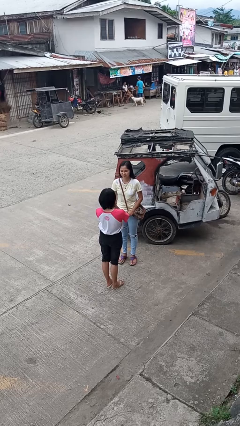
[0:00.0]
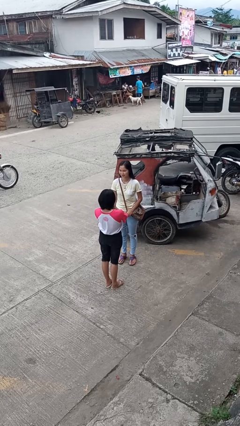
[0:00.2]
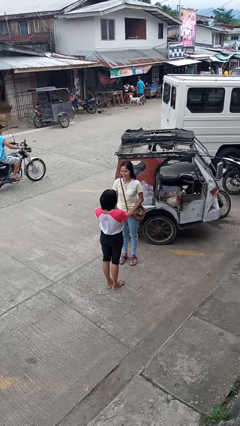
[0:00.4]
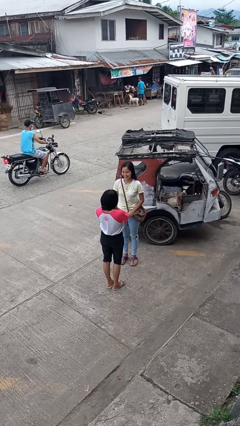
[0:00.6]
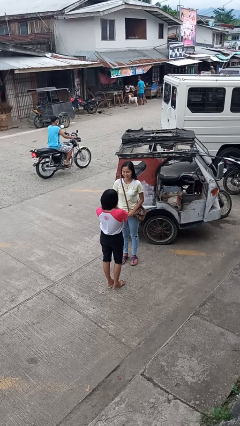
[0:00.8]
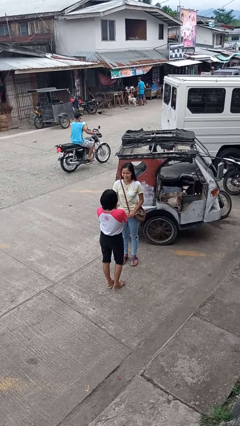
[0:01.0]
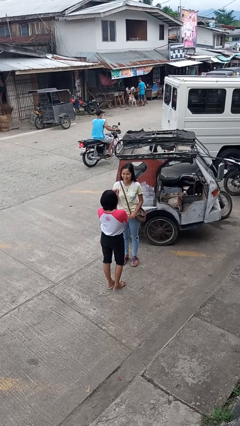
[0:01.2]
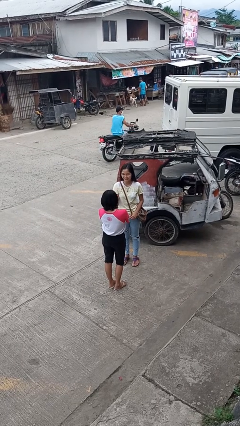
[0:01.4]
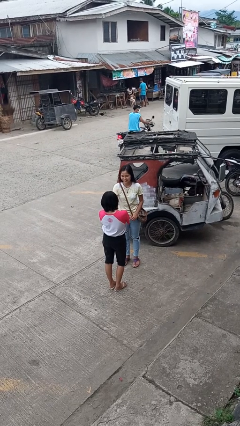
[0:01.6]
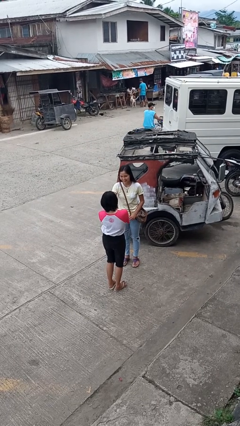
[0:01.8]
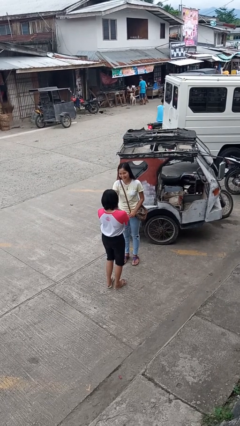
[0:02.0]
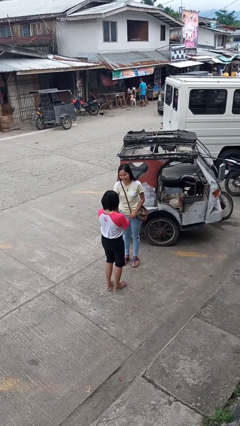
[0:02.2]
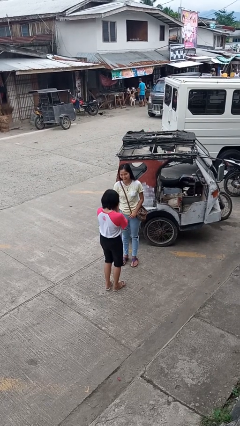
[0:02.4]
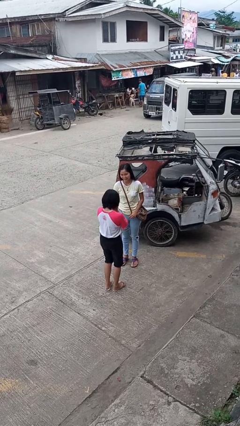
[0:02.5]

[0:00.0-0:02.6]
person laughs with person

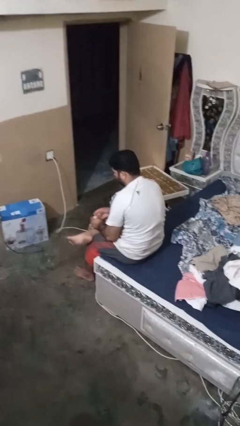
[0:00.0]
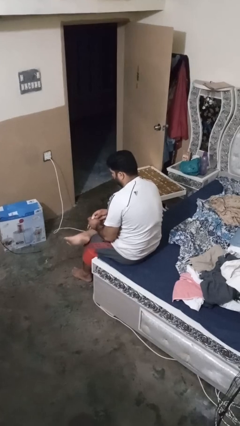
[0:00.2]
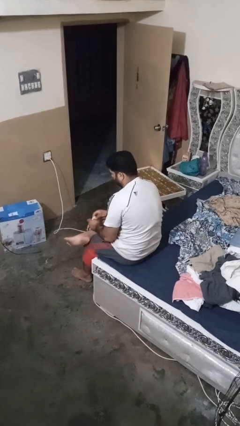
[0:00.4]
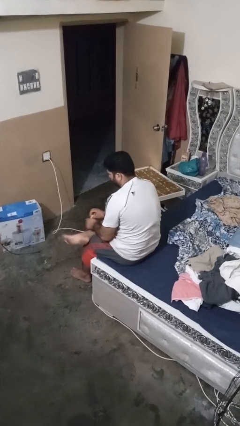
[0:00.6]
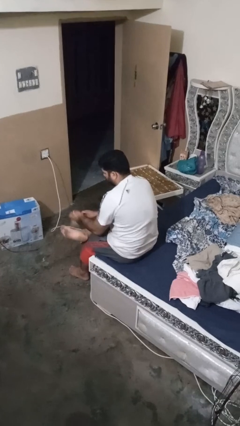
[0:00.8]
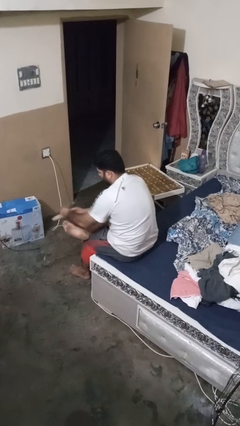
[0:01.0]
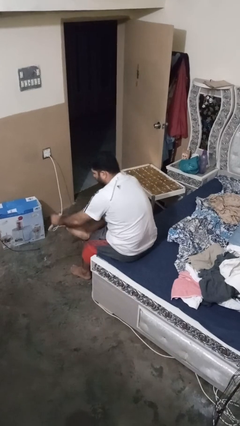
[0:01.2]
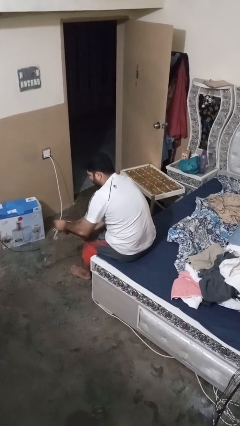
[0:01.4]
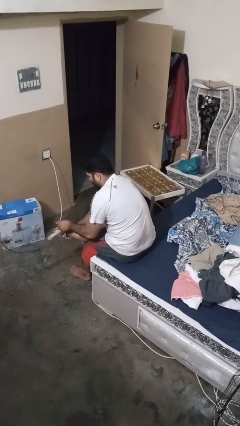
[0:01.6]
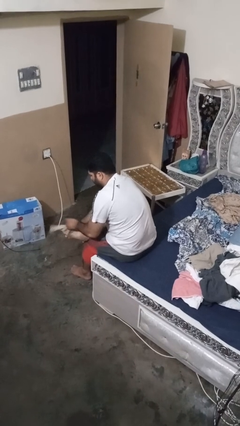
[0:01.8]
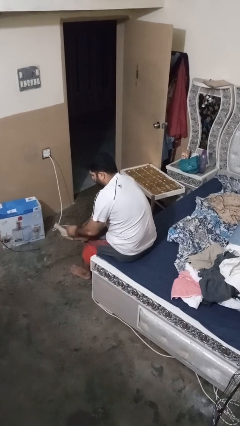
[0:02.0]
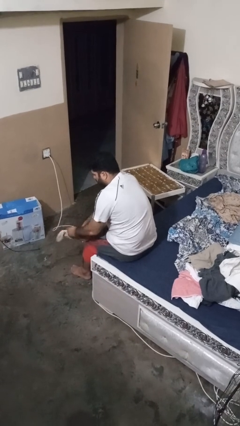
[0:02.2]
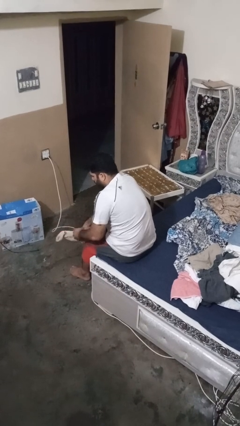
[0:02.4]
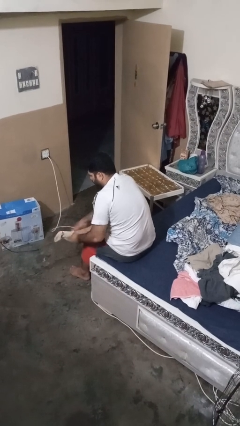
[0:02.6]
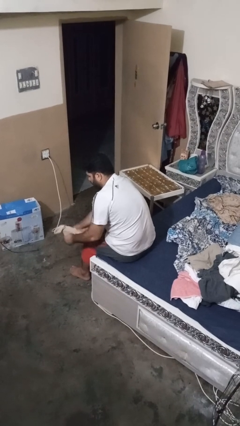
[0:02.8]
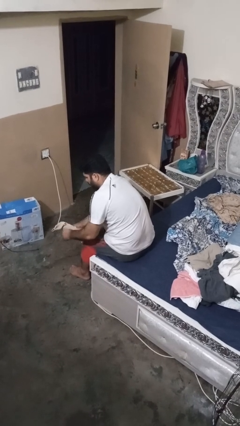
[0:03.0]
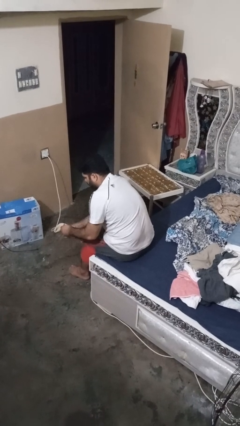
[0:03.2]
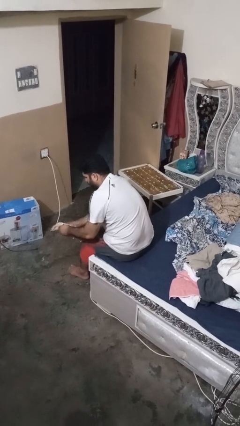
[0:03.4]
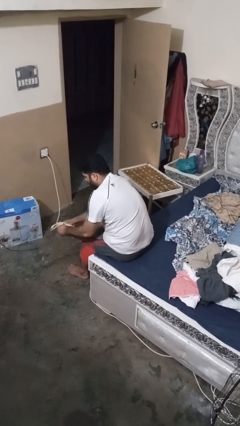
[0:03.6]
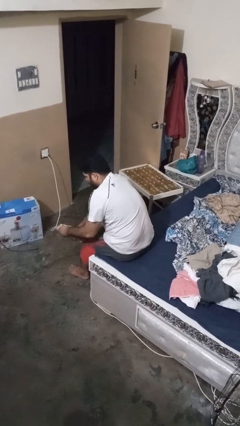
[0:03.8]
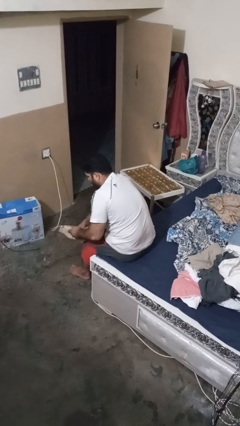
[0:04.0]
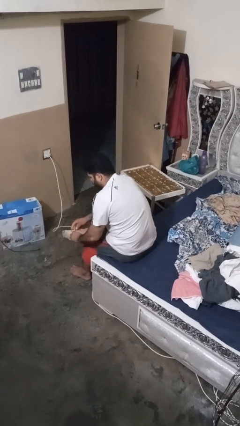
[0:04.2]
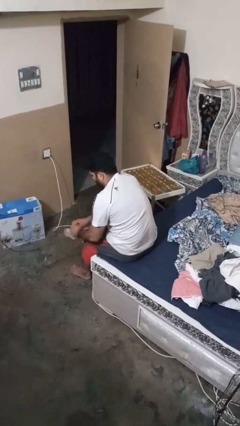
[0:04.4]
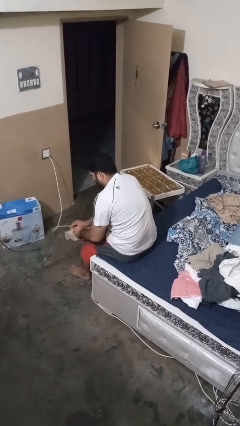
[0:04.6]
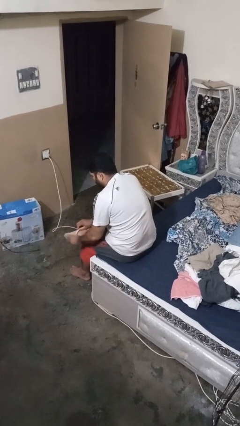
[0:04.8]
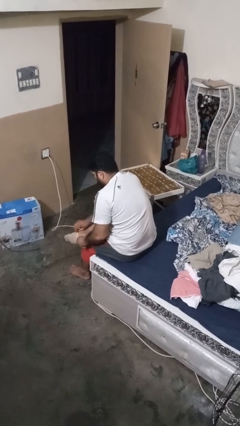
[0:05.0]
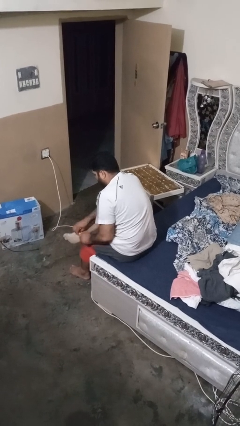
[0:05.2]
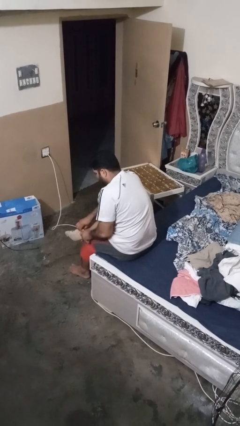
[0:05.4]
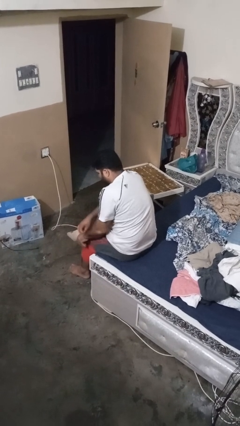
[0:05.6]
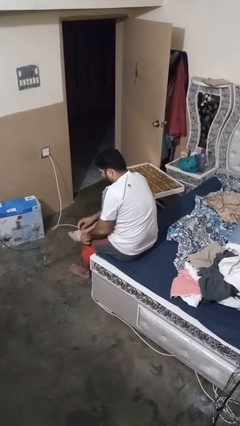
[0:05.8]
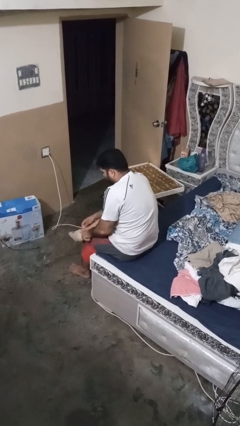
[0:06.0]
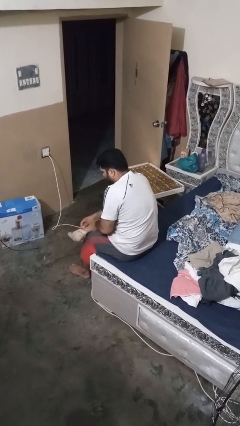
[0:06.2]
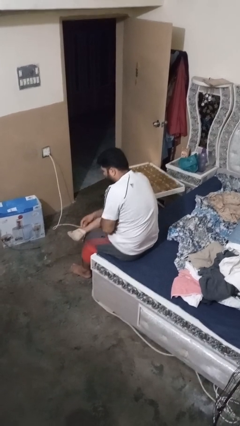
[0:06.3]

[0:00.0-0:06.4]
person puts on socks

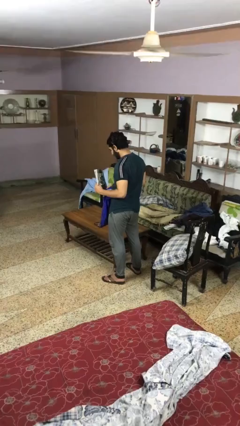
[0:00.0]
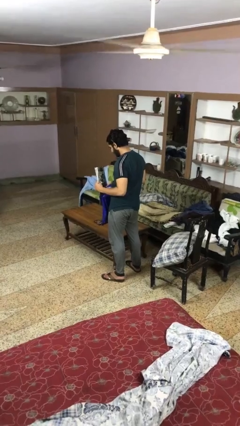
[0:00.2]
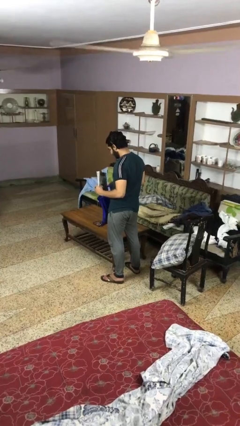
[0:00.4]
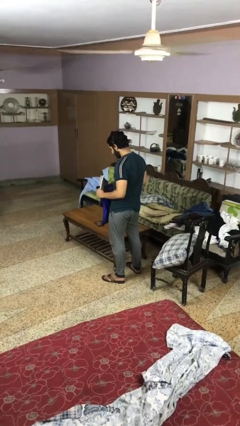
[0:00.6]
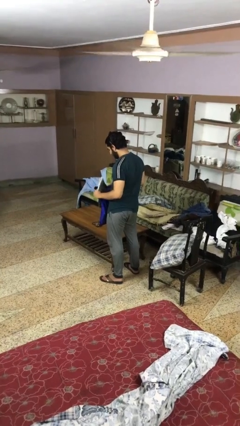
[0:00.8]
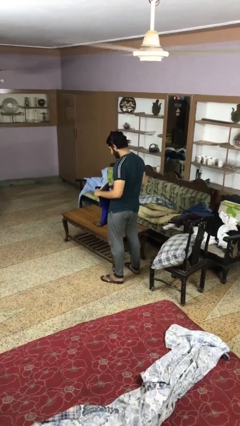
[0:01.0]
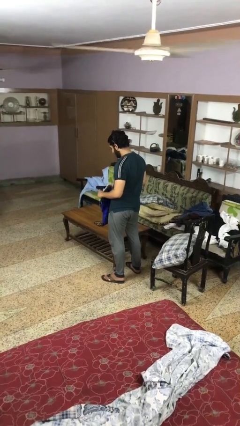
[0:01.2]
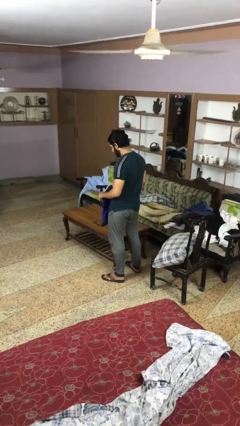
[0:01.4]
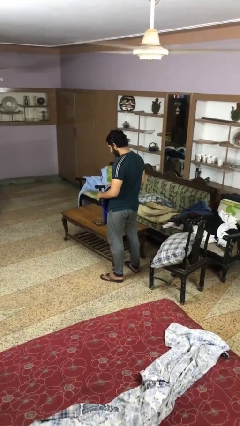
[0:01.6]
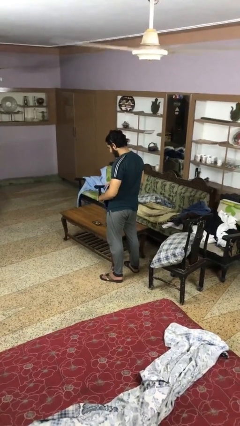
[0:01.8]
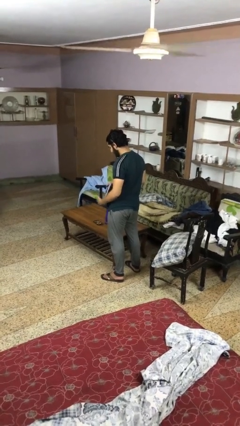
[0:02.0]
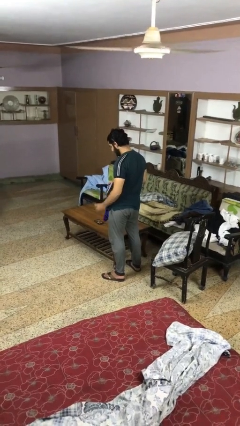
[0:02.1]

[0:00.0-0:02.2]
person puts object into bag

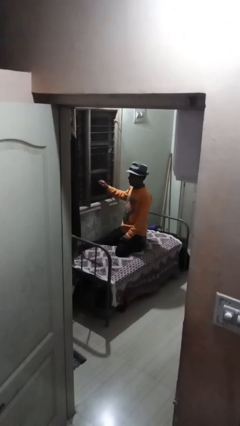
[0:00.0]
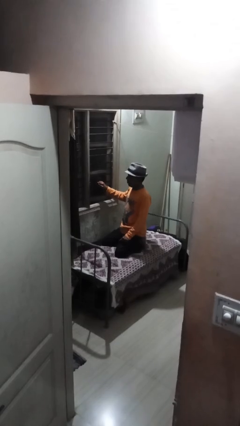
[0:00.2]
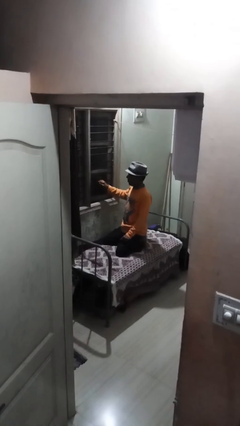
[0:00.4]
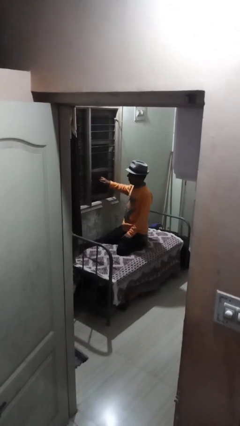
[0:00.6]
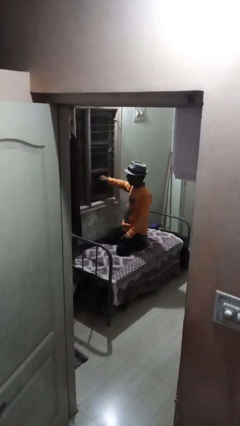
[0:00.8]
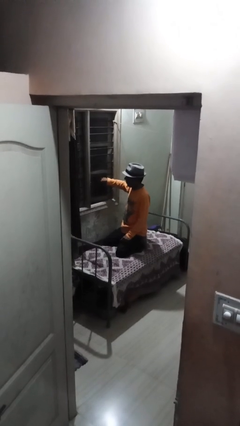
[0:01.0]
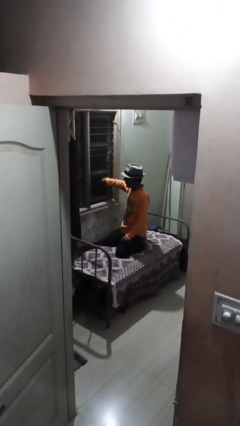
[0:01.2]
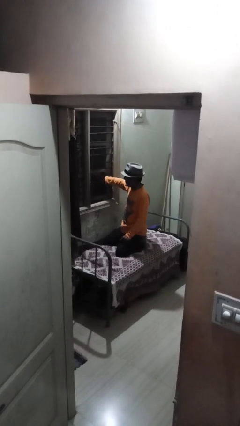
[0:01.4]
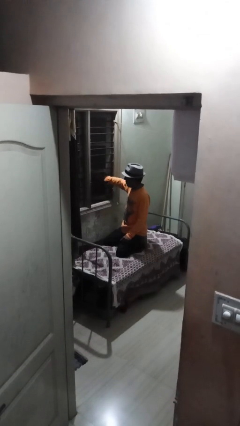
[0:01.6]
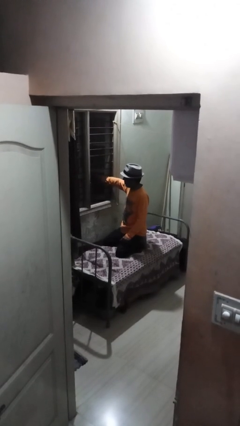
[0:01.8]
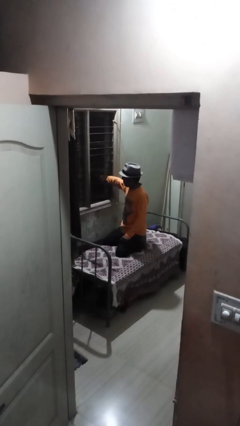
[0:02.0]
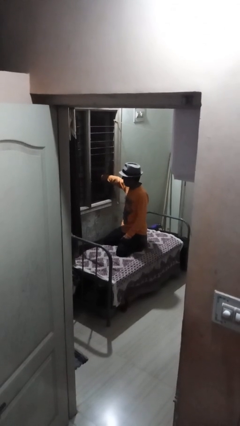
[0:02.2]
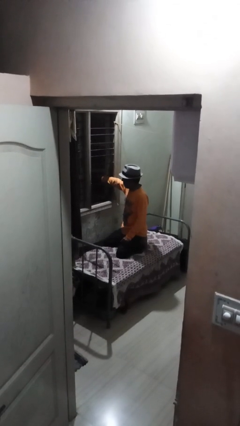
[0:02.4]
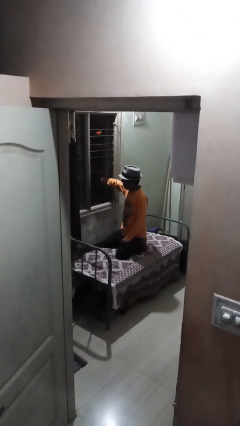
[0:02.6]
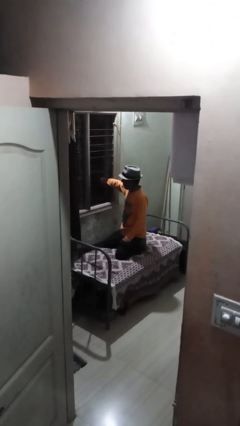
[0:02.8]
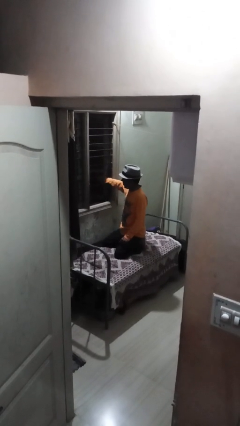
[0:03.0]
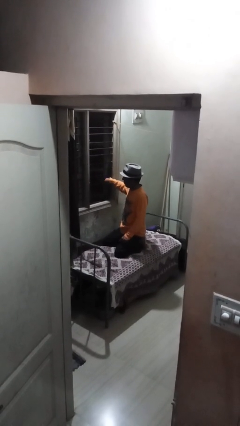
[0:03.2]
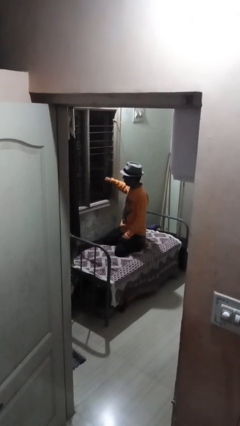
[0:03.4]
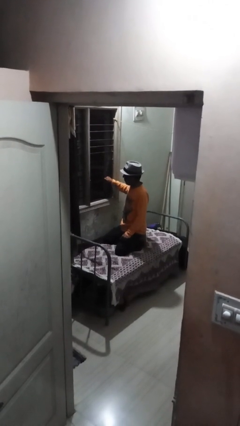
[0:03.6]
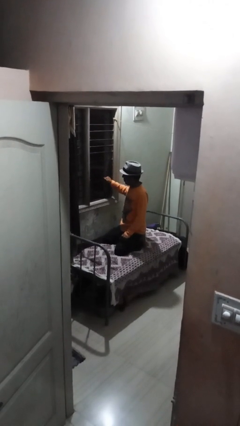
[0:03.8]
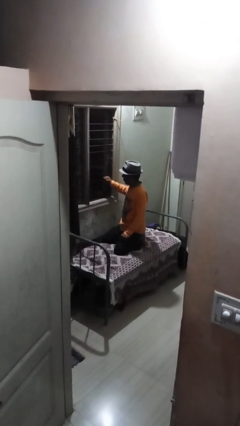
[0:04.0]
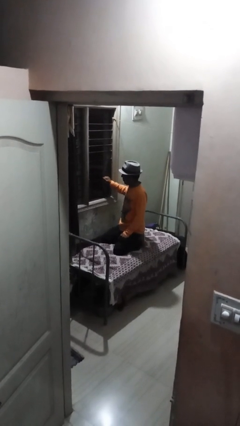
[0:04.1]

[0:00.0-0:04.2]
person opens home window

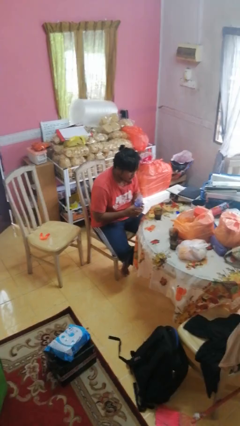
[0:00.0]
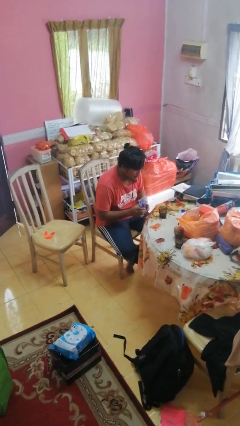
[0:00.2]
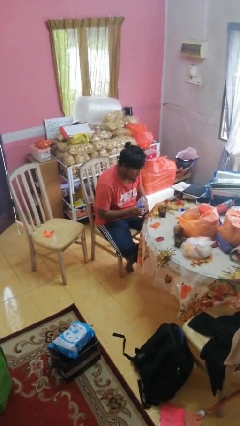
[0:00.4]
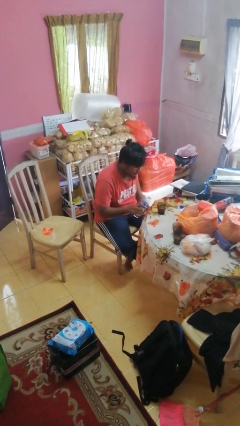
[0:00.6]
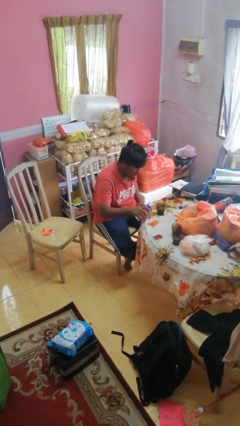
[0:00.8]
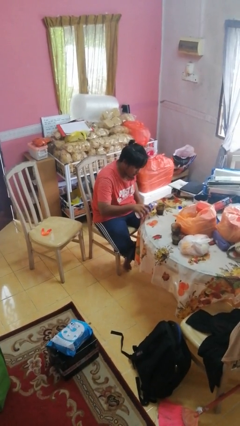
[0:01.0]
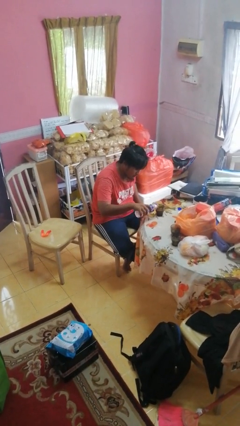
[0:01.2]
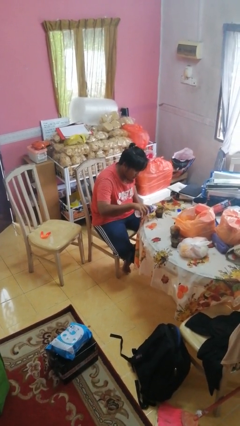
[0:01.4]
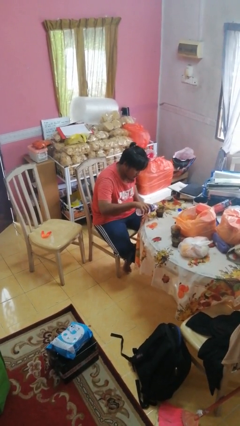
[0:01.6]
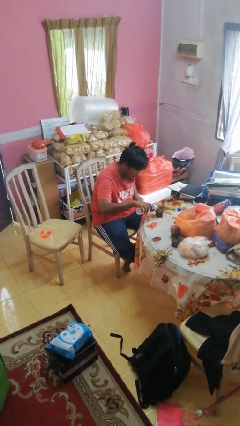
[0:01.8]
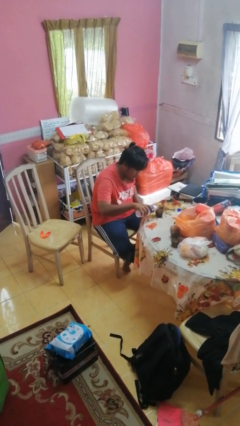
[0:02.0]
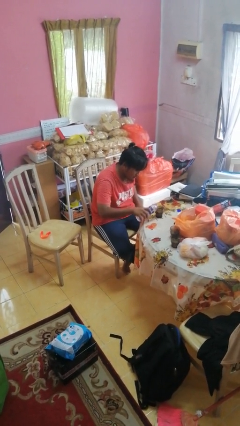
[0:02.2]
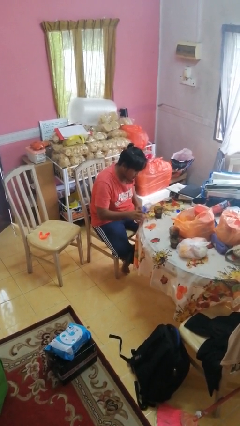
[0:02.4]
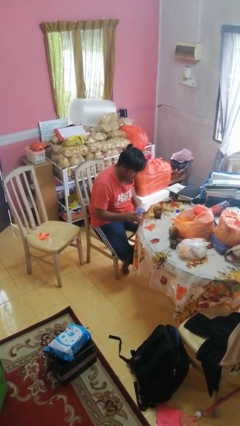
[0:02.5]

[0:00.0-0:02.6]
person pours liquid into cup
